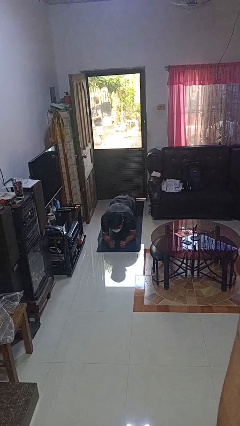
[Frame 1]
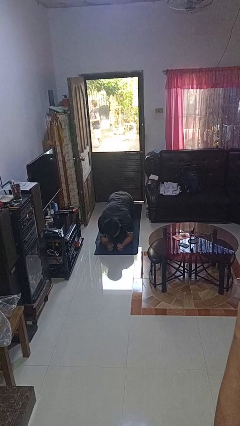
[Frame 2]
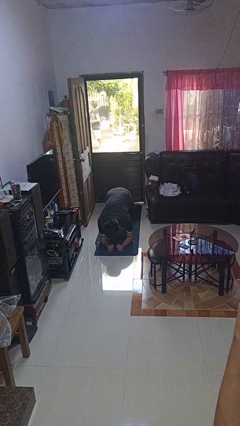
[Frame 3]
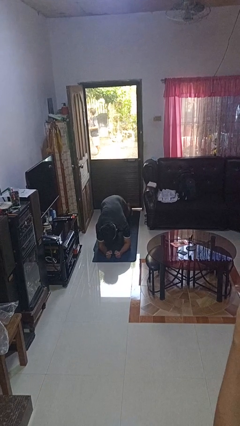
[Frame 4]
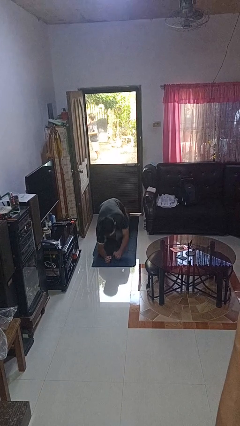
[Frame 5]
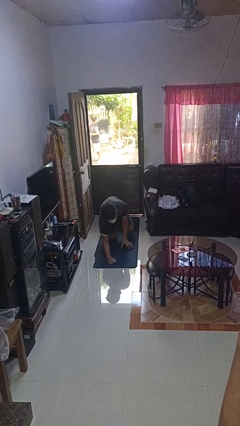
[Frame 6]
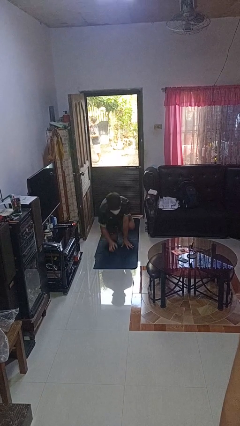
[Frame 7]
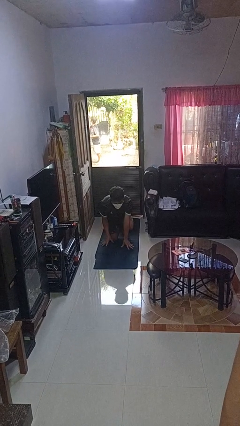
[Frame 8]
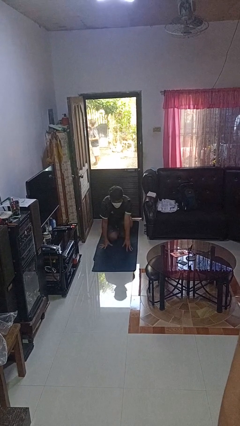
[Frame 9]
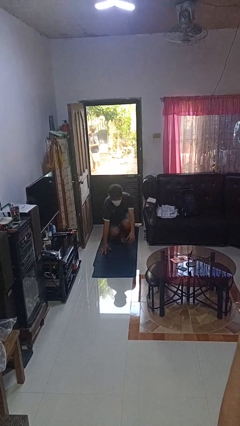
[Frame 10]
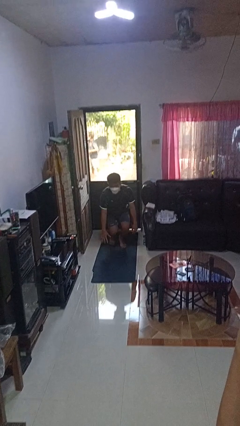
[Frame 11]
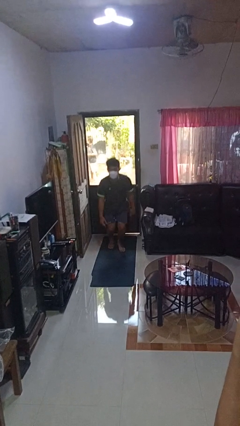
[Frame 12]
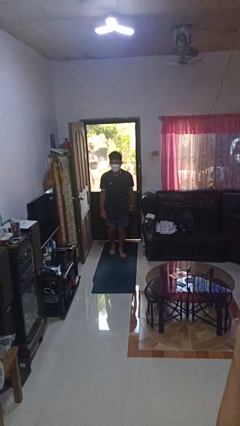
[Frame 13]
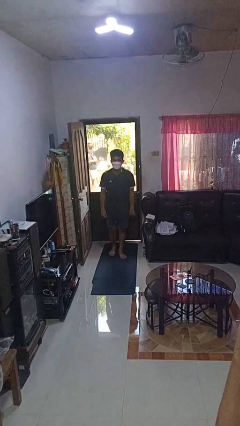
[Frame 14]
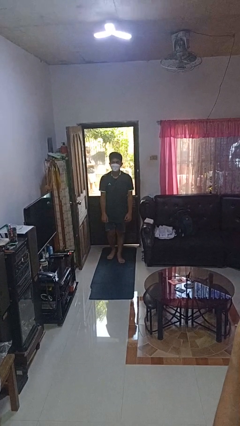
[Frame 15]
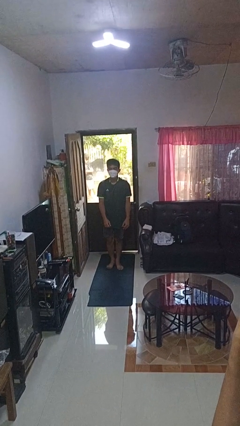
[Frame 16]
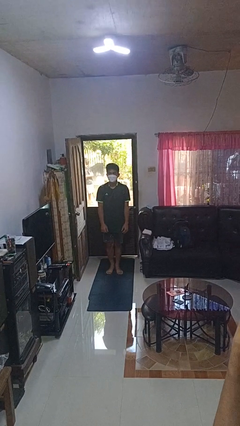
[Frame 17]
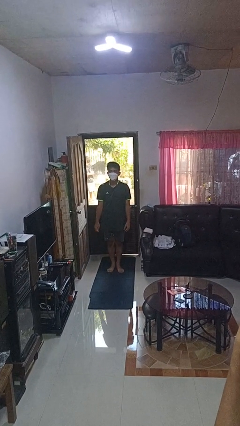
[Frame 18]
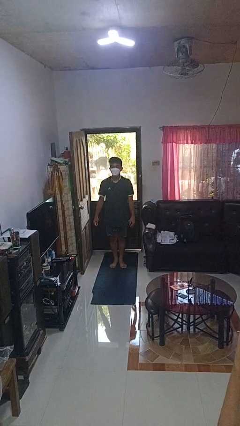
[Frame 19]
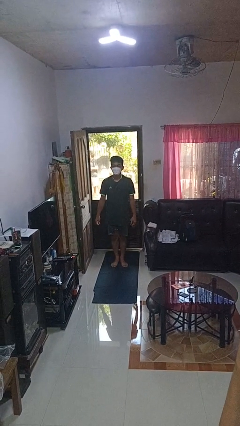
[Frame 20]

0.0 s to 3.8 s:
person stands up from floor

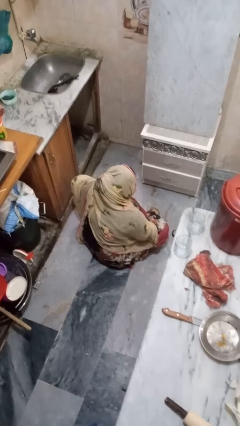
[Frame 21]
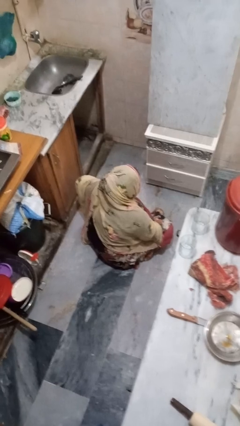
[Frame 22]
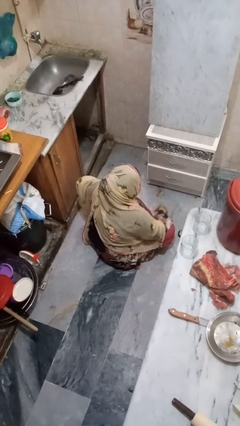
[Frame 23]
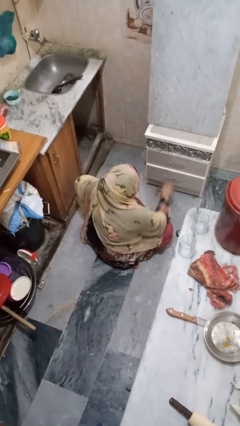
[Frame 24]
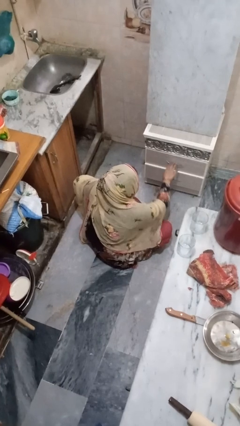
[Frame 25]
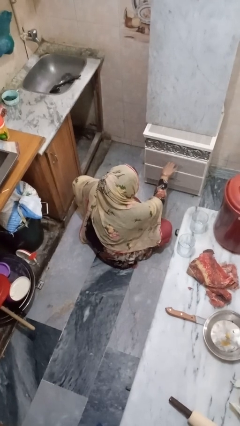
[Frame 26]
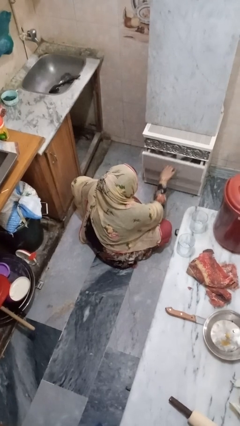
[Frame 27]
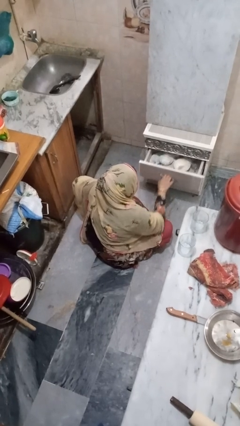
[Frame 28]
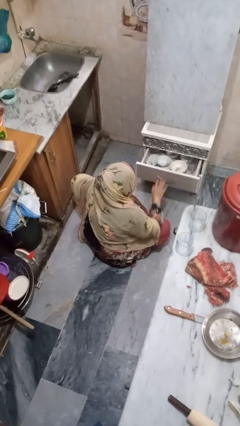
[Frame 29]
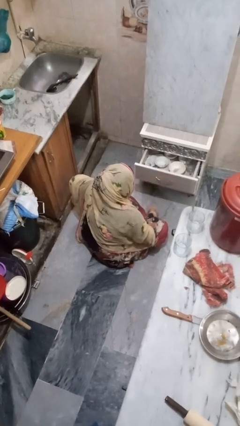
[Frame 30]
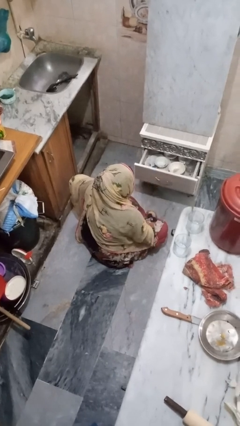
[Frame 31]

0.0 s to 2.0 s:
person opens kitchen drawer

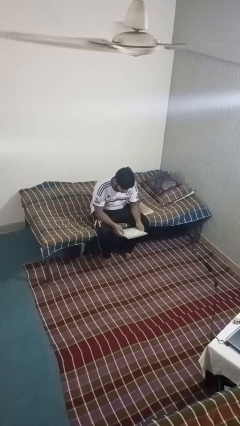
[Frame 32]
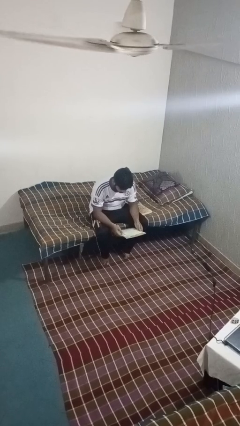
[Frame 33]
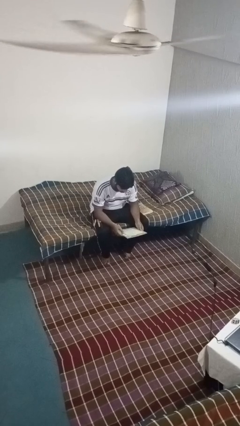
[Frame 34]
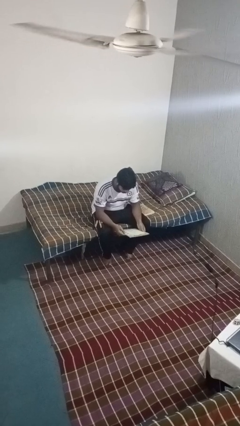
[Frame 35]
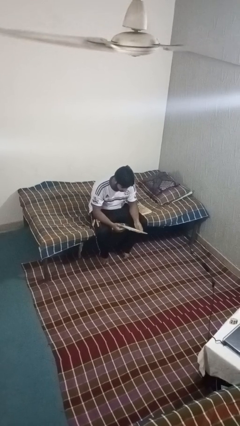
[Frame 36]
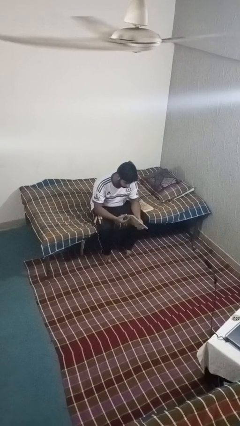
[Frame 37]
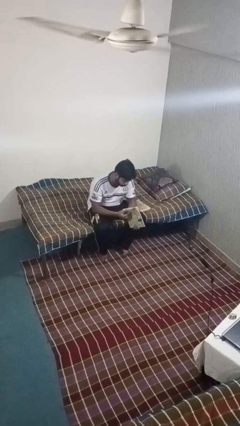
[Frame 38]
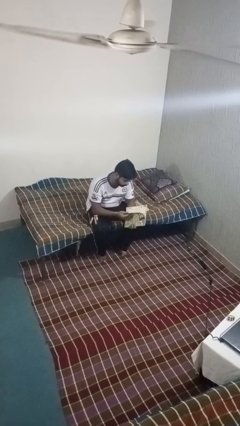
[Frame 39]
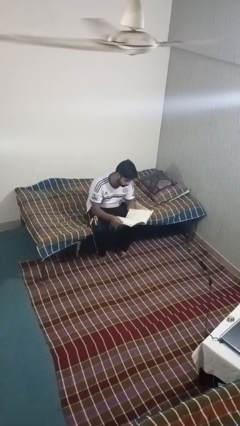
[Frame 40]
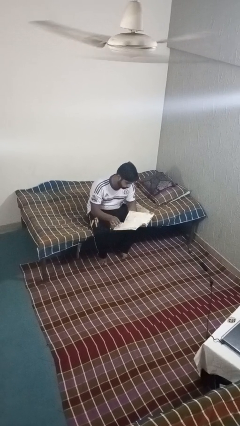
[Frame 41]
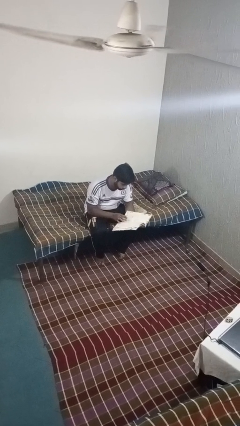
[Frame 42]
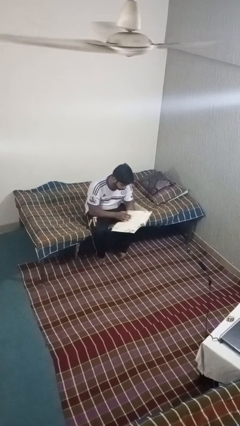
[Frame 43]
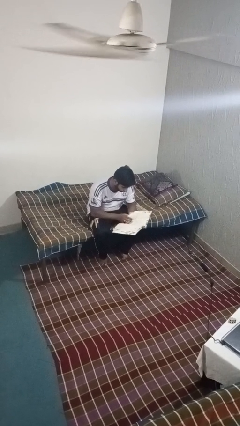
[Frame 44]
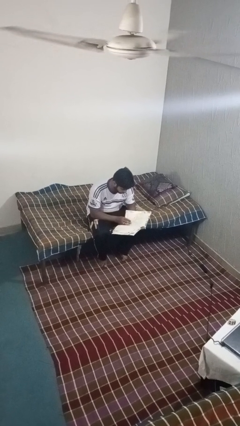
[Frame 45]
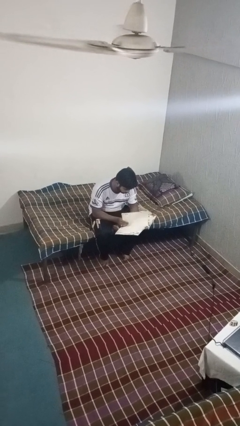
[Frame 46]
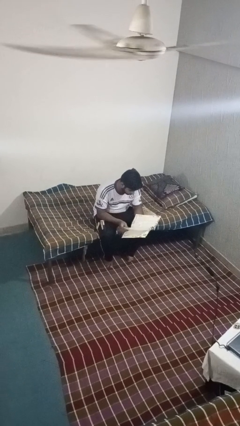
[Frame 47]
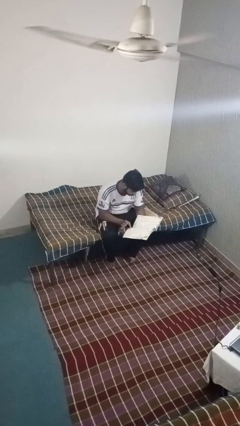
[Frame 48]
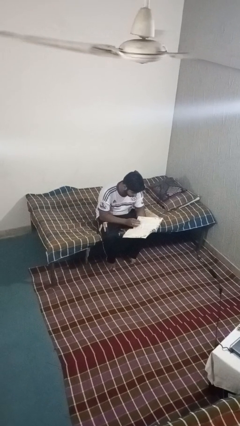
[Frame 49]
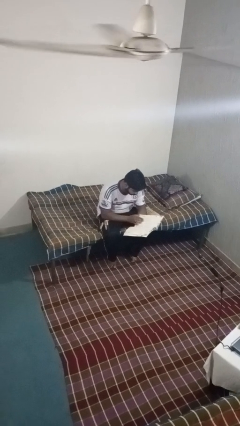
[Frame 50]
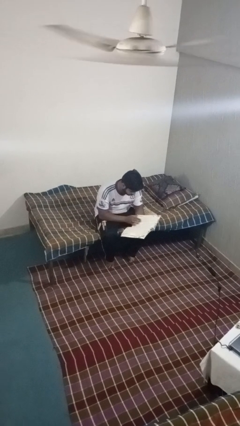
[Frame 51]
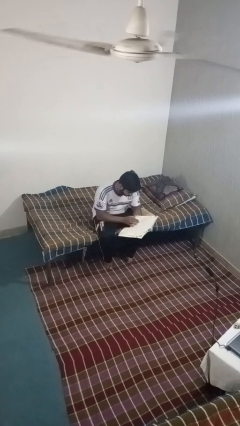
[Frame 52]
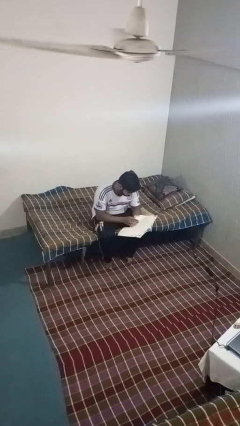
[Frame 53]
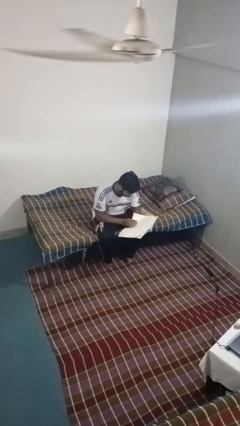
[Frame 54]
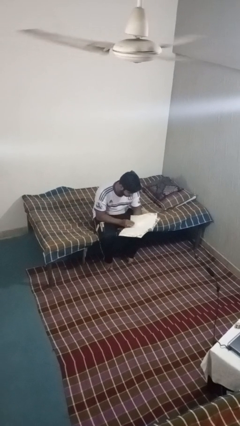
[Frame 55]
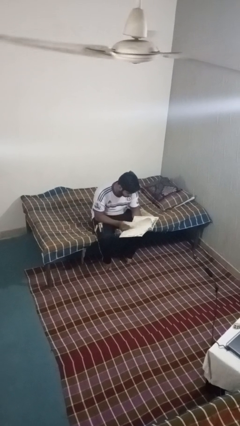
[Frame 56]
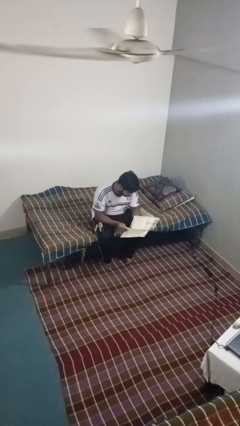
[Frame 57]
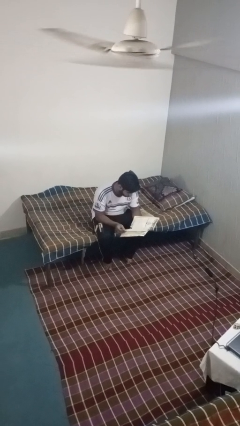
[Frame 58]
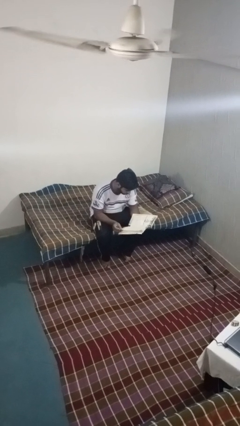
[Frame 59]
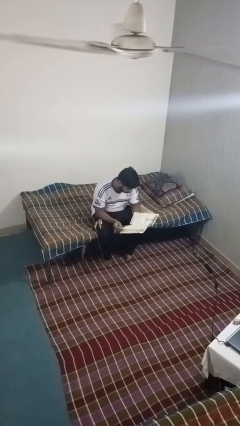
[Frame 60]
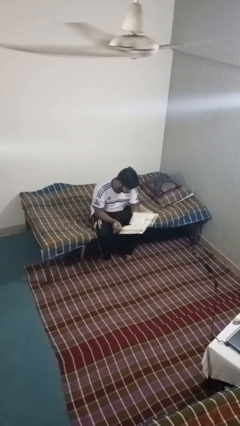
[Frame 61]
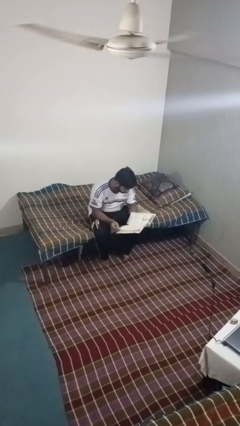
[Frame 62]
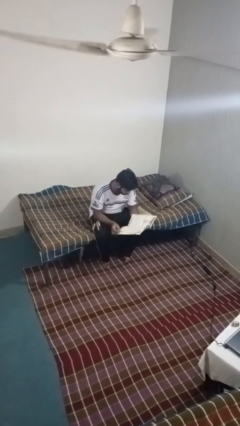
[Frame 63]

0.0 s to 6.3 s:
person reads magazine

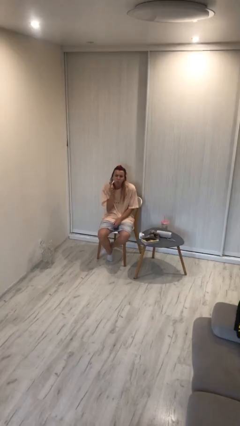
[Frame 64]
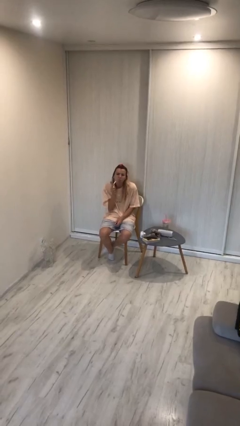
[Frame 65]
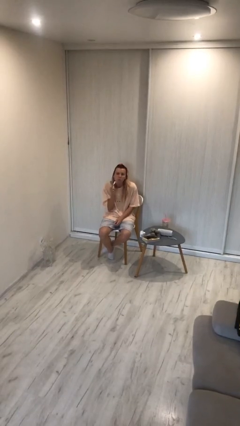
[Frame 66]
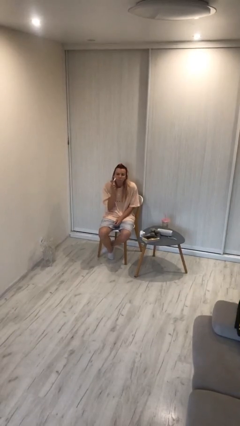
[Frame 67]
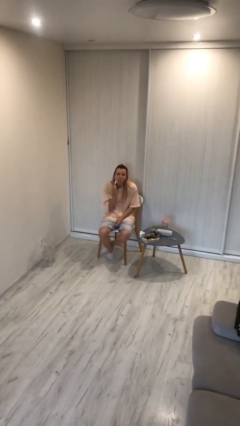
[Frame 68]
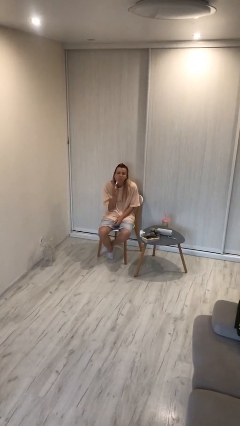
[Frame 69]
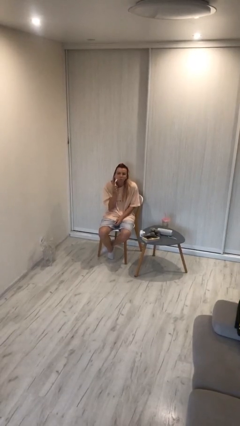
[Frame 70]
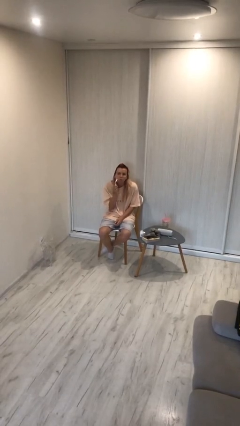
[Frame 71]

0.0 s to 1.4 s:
person shaves face

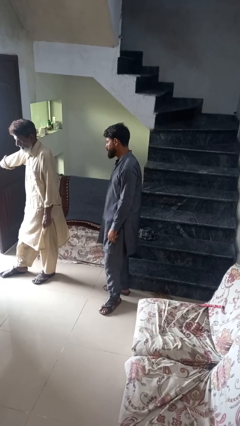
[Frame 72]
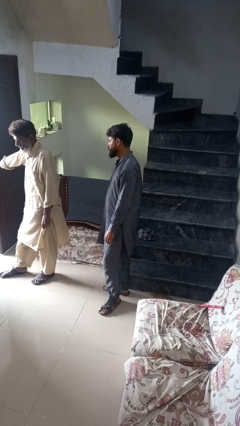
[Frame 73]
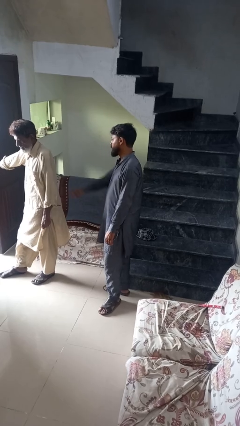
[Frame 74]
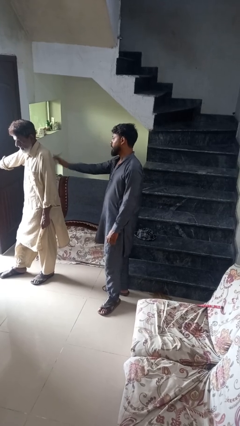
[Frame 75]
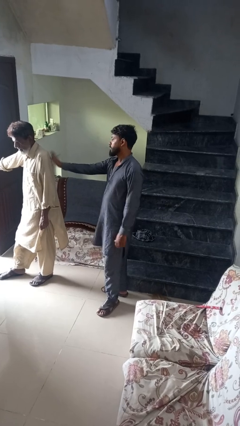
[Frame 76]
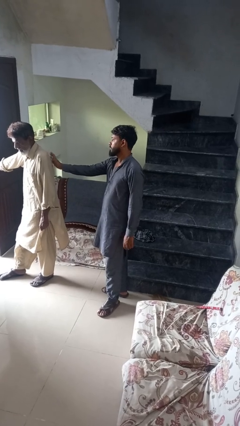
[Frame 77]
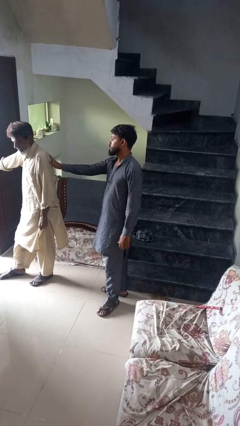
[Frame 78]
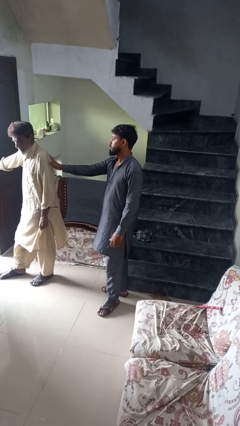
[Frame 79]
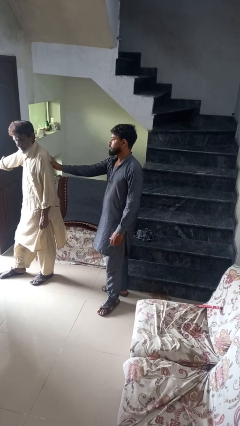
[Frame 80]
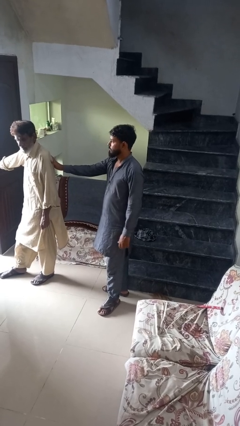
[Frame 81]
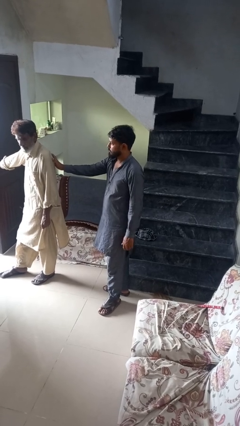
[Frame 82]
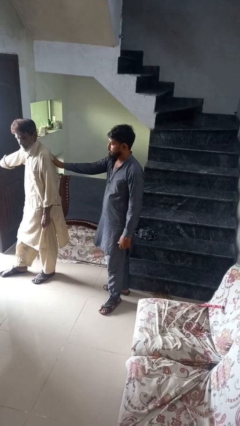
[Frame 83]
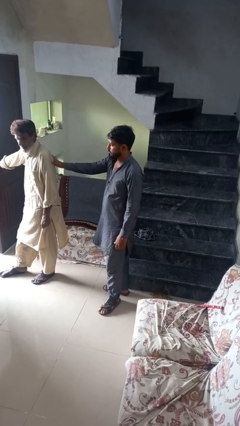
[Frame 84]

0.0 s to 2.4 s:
person touches back of person

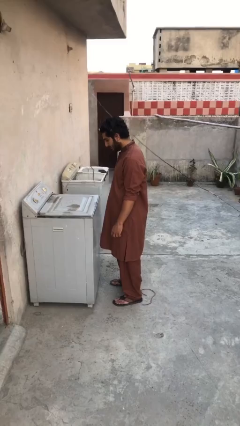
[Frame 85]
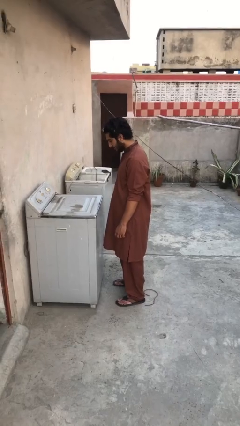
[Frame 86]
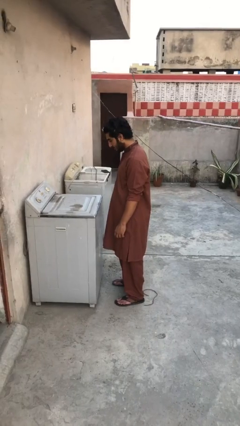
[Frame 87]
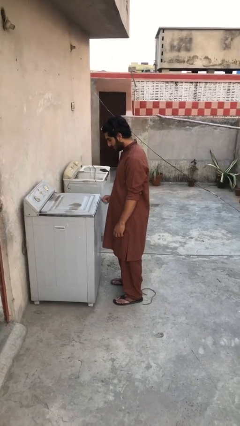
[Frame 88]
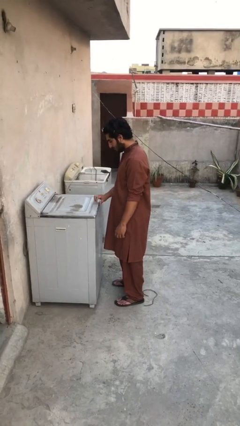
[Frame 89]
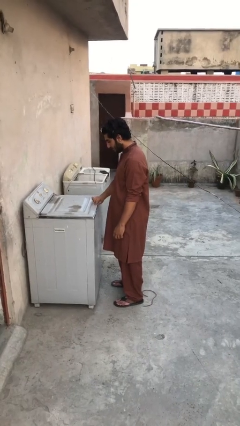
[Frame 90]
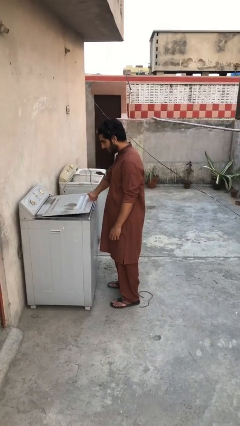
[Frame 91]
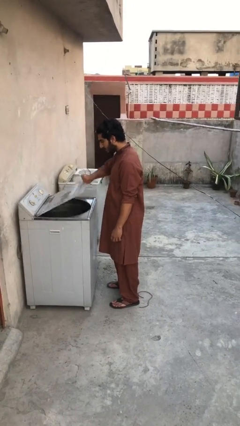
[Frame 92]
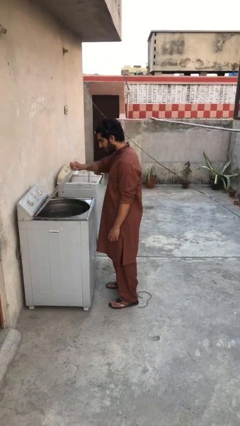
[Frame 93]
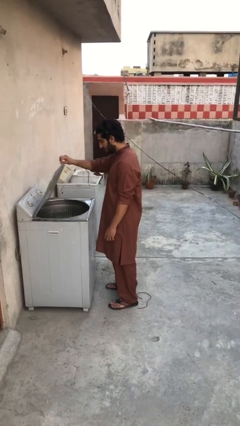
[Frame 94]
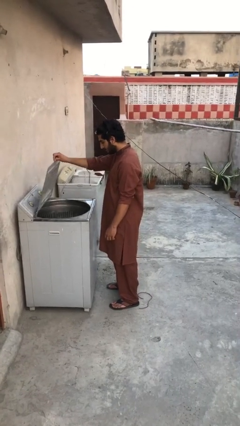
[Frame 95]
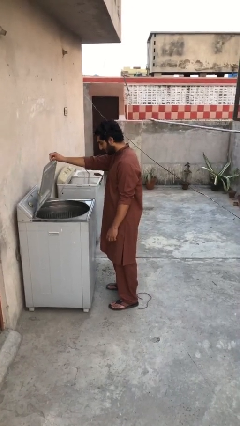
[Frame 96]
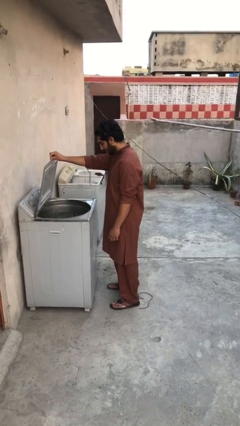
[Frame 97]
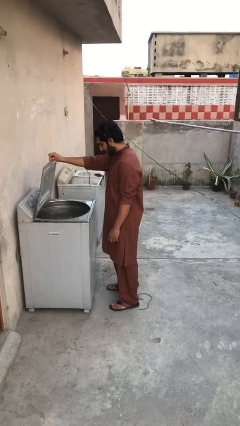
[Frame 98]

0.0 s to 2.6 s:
person opens clothes washer
